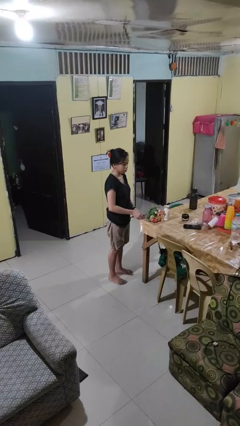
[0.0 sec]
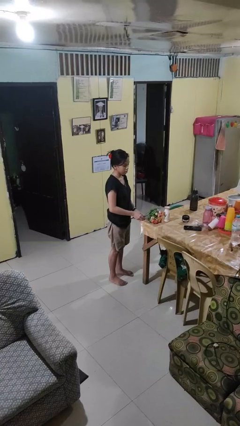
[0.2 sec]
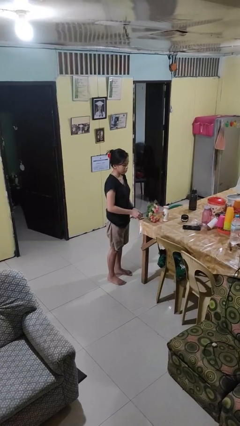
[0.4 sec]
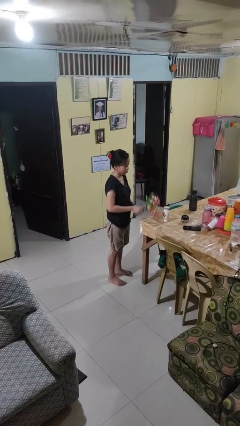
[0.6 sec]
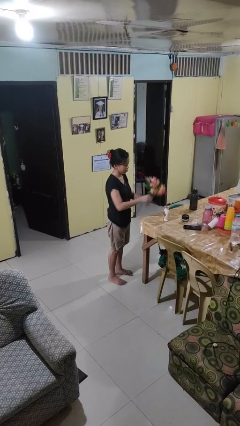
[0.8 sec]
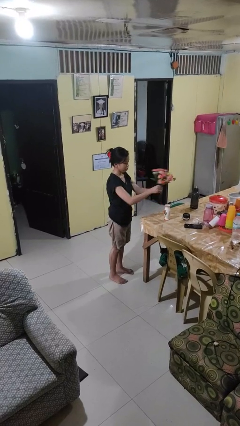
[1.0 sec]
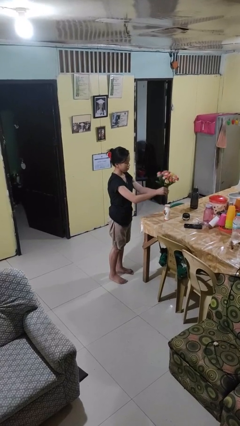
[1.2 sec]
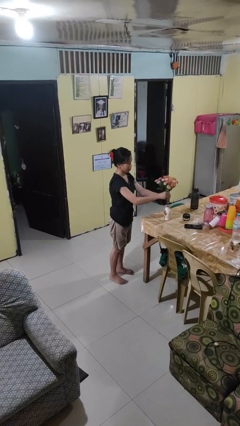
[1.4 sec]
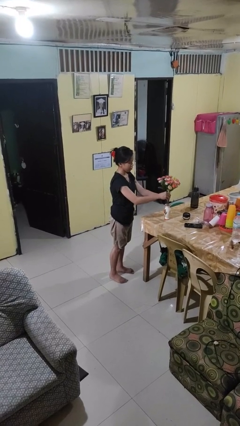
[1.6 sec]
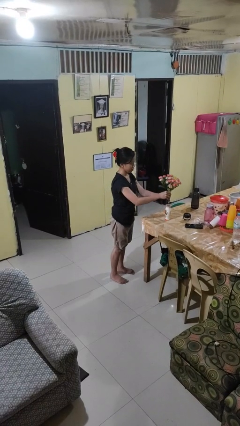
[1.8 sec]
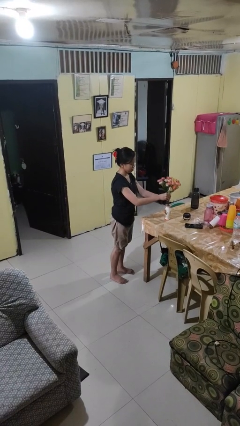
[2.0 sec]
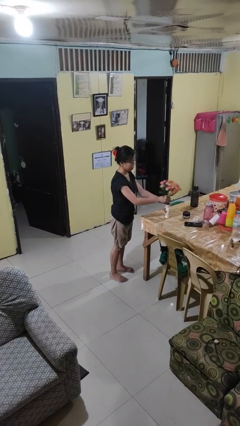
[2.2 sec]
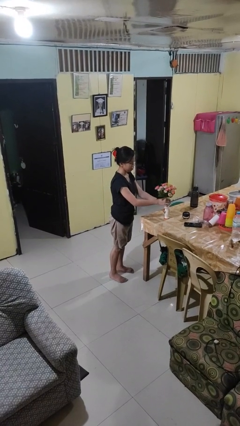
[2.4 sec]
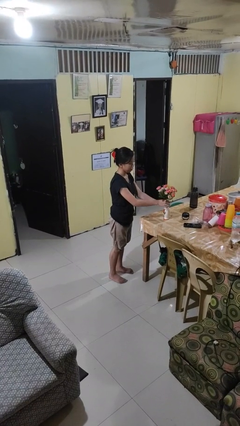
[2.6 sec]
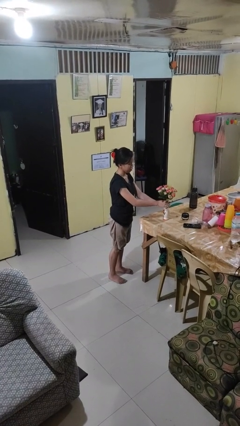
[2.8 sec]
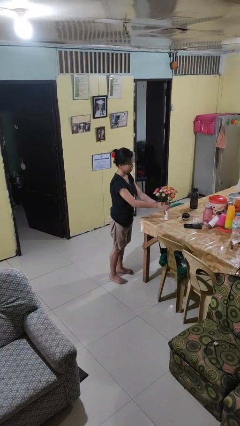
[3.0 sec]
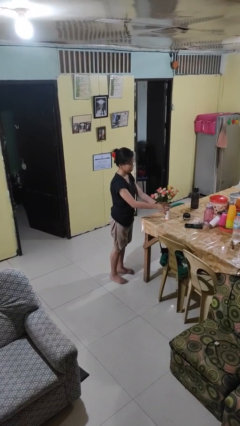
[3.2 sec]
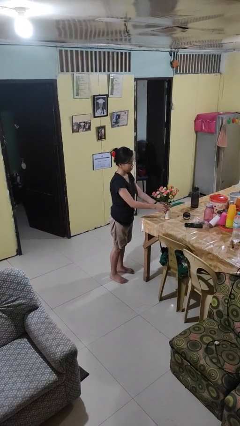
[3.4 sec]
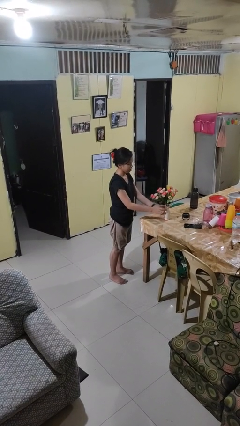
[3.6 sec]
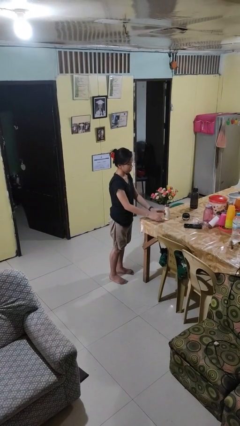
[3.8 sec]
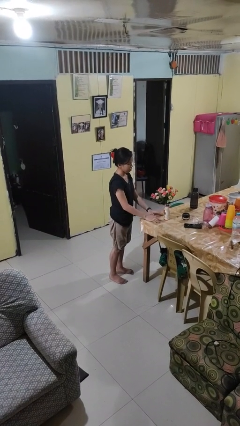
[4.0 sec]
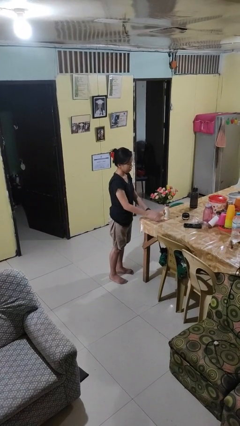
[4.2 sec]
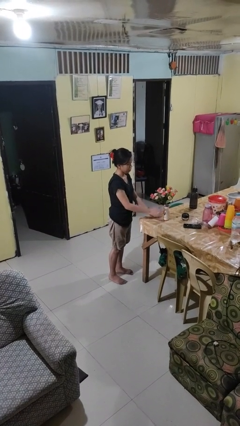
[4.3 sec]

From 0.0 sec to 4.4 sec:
person arranges flowers in vase

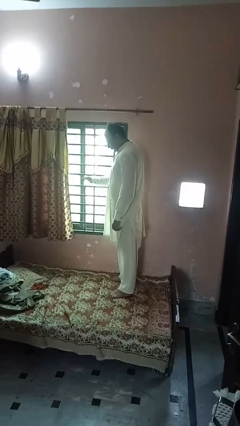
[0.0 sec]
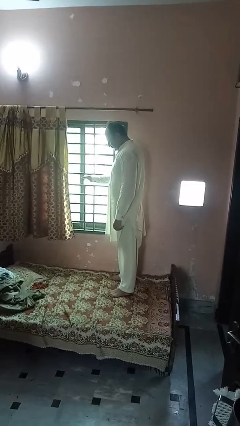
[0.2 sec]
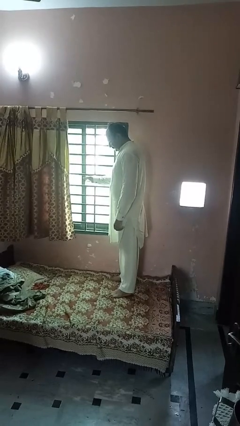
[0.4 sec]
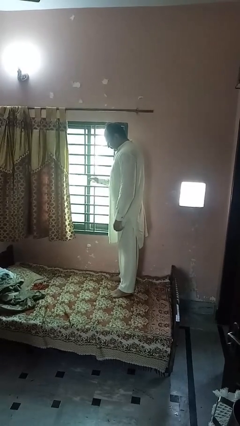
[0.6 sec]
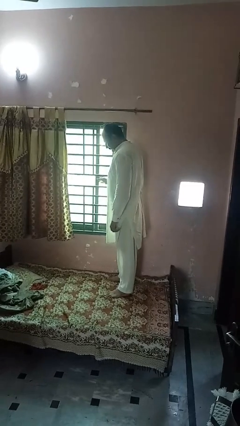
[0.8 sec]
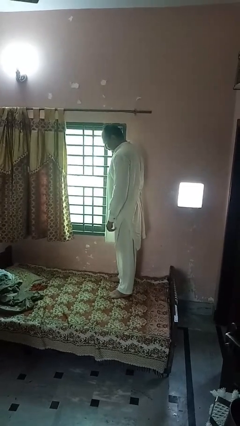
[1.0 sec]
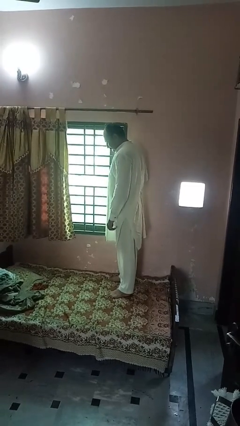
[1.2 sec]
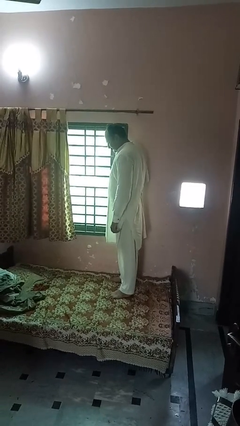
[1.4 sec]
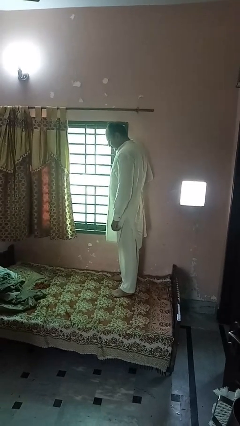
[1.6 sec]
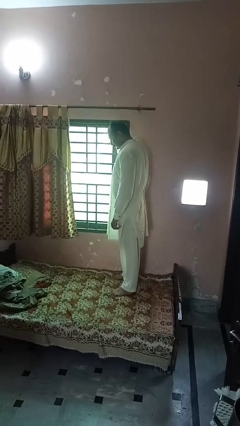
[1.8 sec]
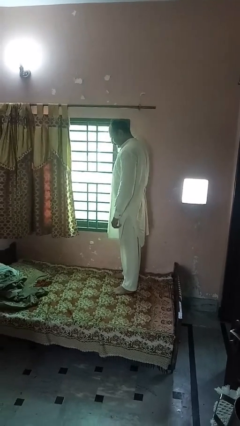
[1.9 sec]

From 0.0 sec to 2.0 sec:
person closes home window

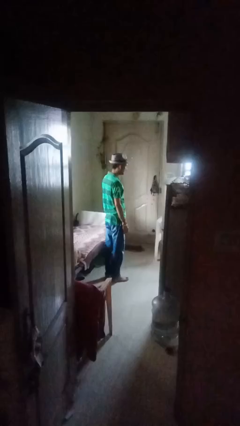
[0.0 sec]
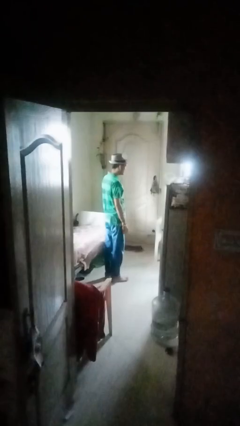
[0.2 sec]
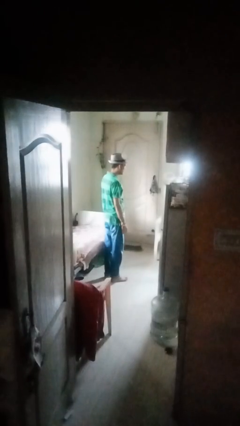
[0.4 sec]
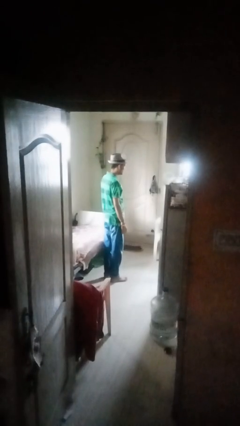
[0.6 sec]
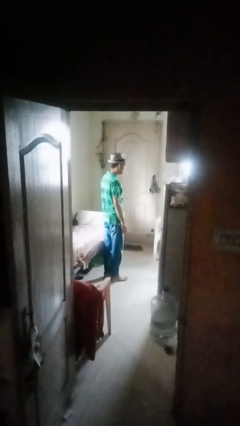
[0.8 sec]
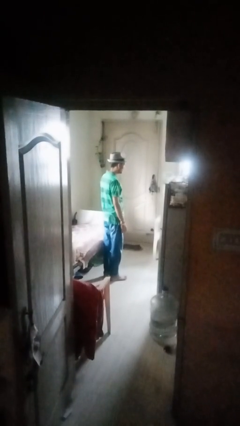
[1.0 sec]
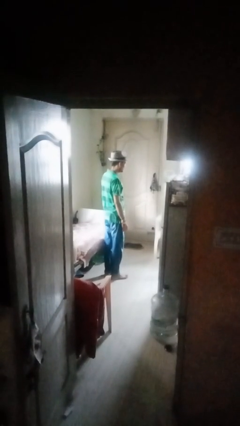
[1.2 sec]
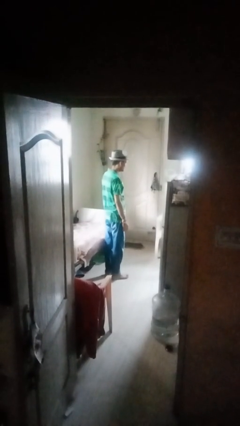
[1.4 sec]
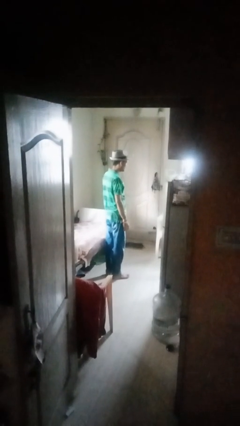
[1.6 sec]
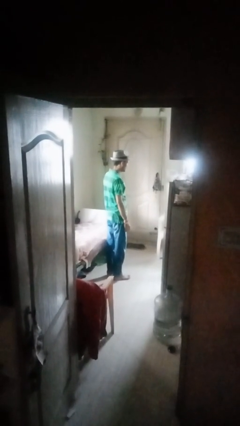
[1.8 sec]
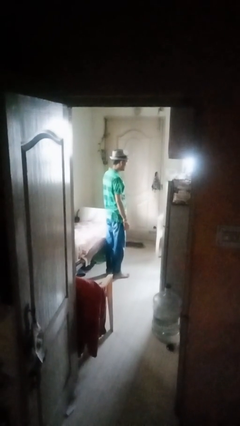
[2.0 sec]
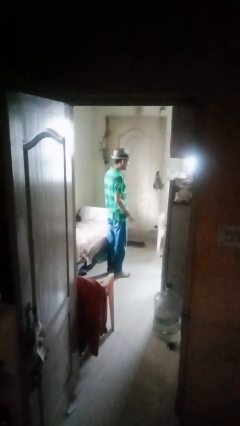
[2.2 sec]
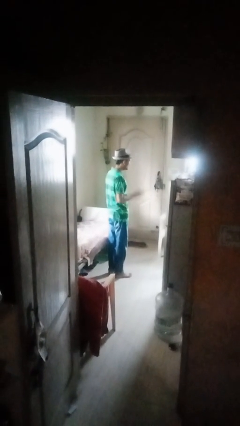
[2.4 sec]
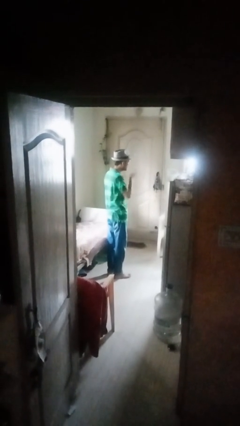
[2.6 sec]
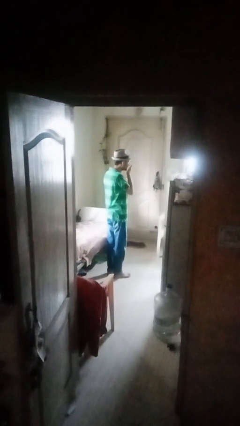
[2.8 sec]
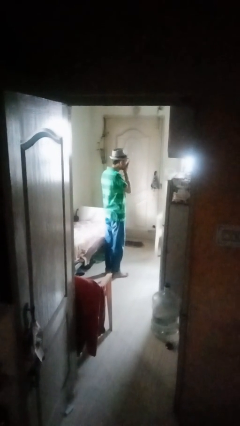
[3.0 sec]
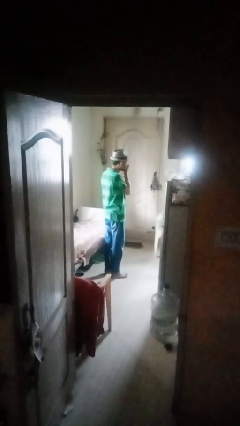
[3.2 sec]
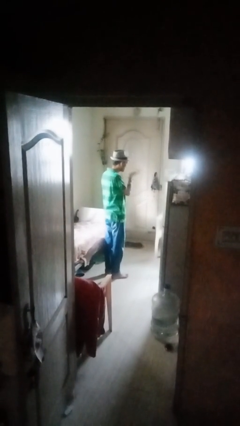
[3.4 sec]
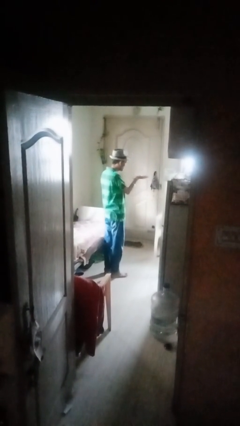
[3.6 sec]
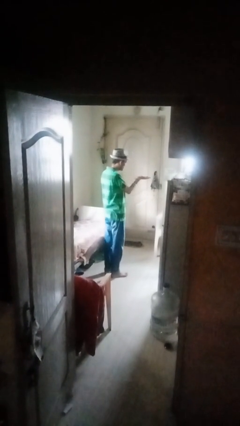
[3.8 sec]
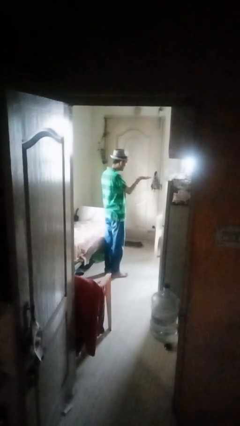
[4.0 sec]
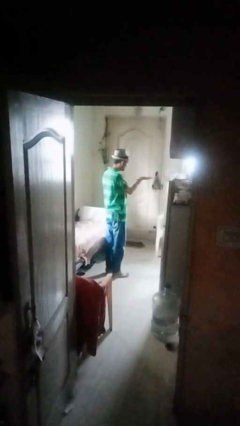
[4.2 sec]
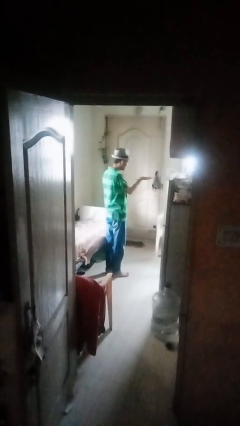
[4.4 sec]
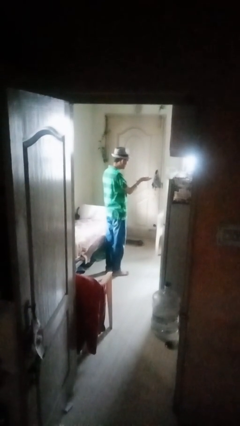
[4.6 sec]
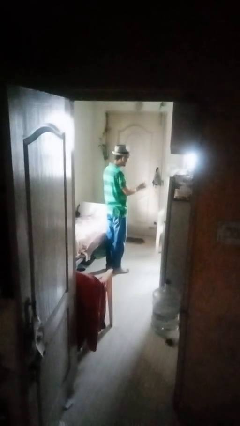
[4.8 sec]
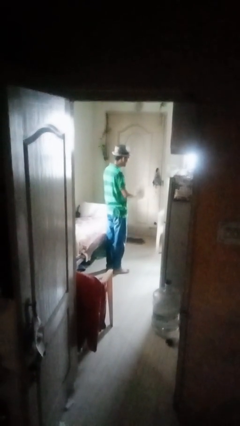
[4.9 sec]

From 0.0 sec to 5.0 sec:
person gestures blow kiss

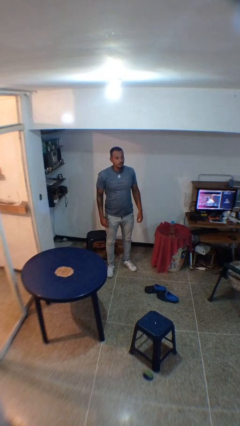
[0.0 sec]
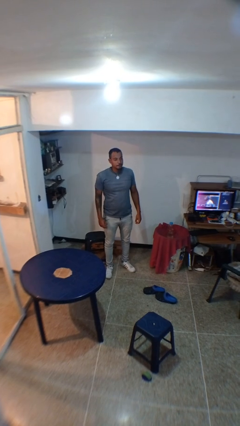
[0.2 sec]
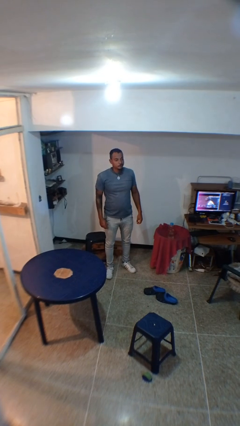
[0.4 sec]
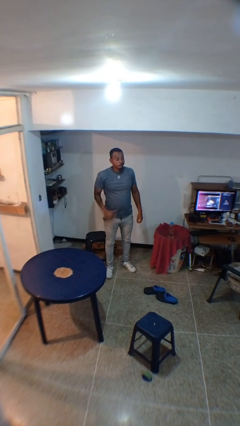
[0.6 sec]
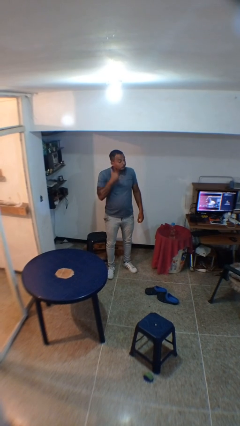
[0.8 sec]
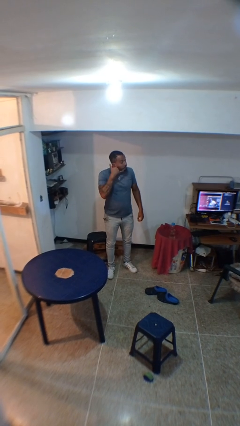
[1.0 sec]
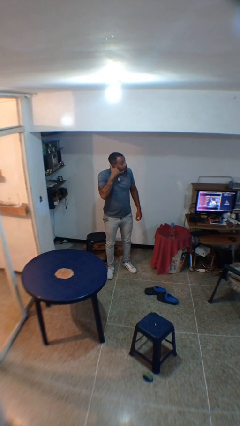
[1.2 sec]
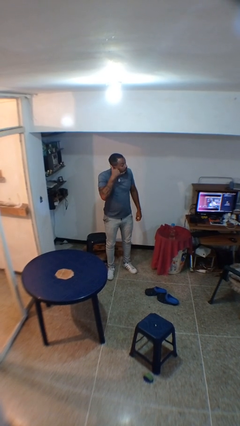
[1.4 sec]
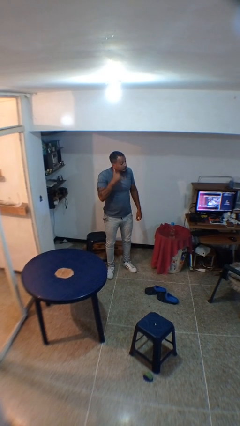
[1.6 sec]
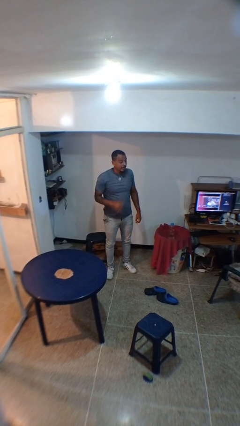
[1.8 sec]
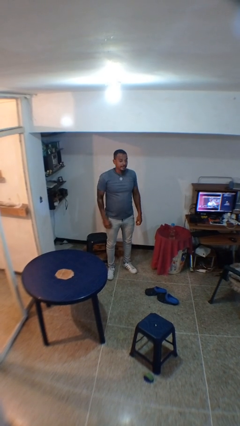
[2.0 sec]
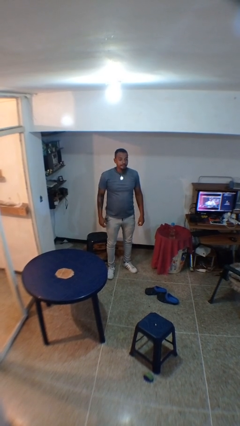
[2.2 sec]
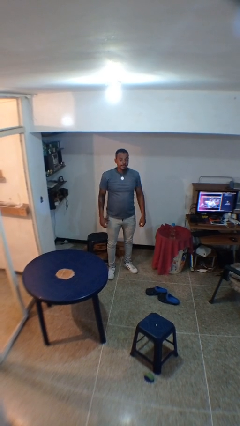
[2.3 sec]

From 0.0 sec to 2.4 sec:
person gestures call me

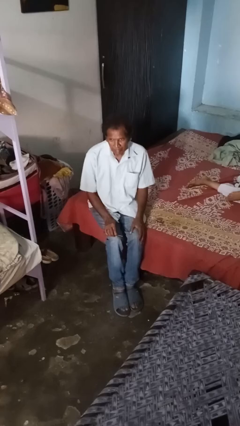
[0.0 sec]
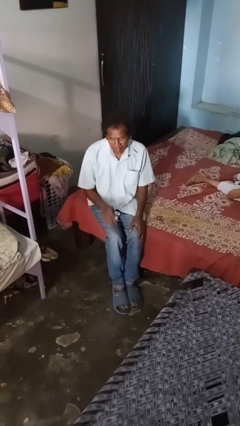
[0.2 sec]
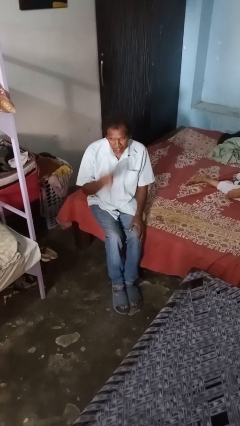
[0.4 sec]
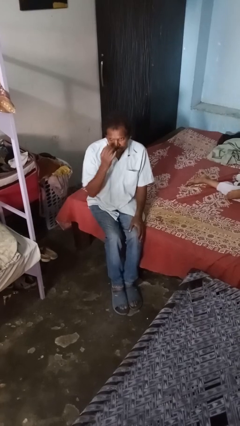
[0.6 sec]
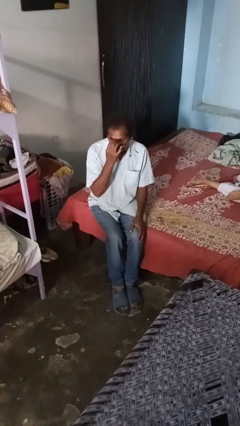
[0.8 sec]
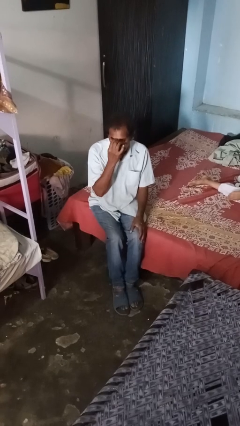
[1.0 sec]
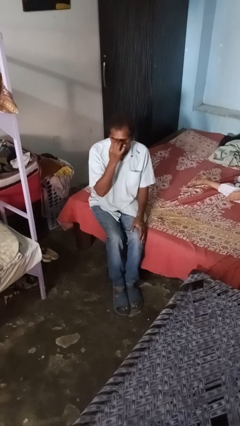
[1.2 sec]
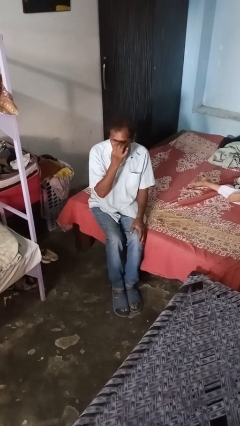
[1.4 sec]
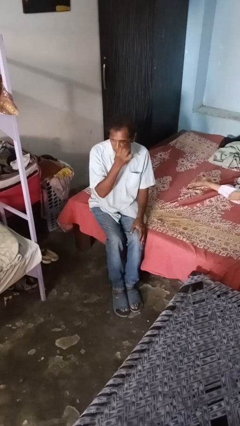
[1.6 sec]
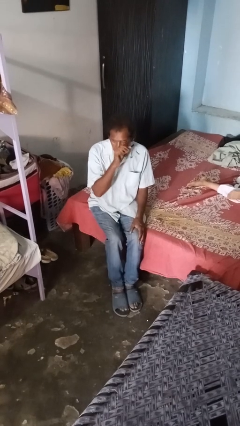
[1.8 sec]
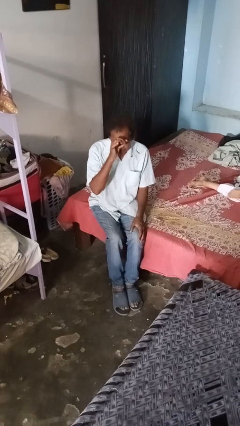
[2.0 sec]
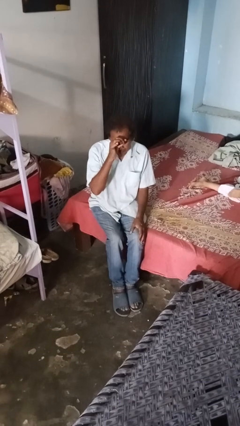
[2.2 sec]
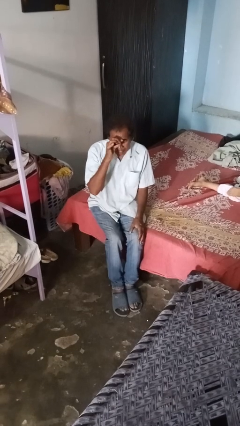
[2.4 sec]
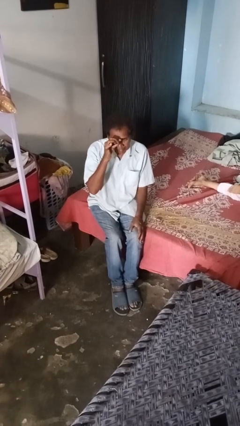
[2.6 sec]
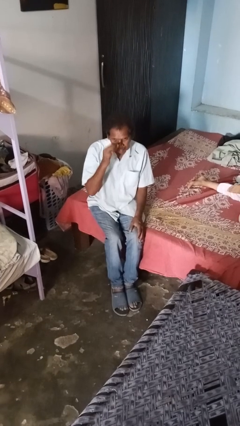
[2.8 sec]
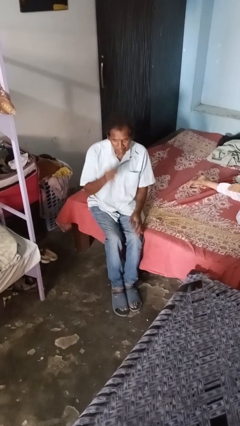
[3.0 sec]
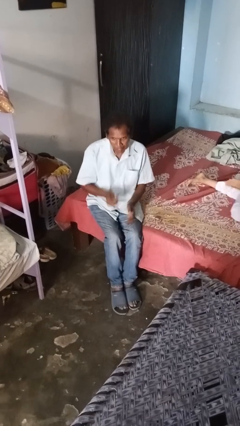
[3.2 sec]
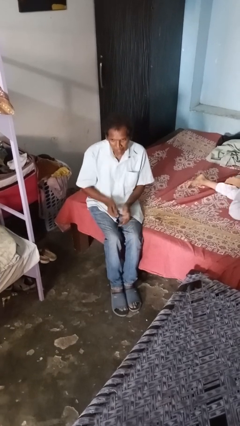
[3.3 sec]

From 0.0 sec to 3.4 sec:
person applies eye makeup

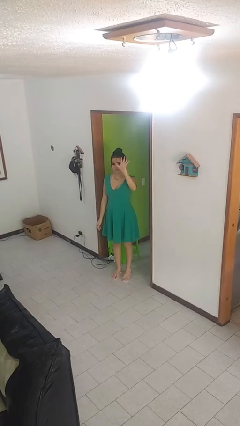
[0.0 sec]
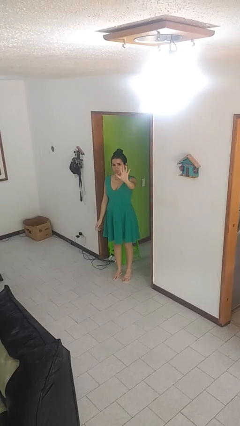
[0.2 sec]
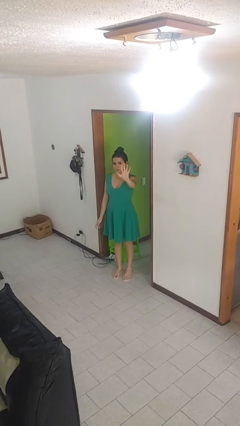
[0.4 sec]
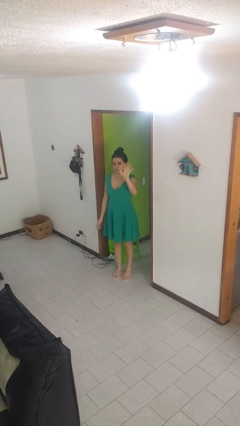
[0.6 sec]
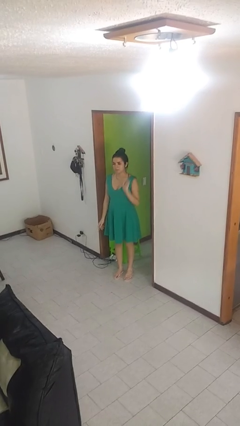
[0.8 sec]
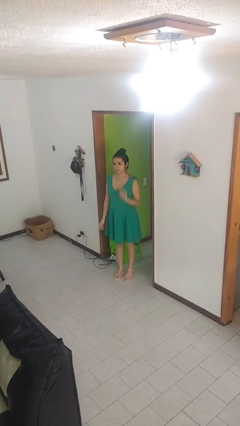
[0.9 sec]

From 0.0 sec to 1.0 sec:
person gestures number five
